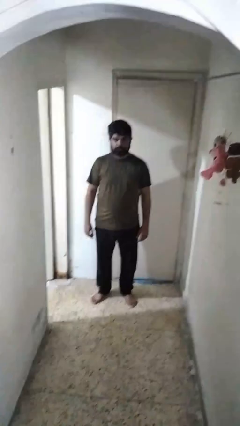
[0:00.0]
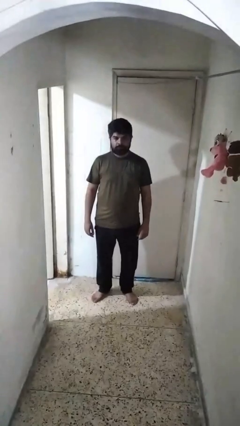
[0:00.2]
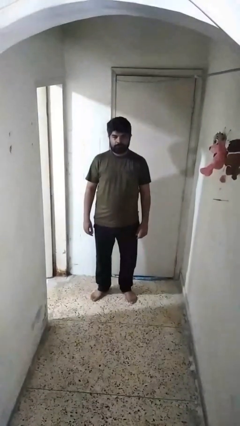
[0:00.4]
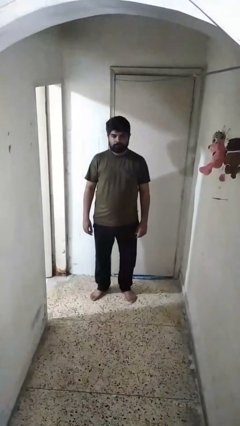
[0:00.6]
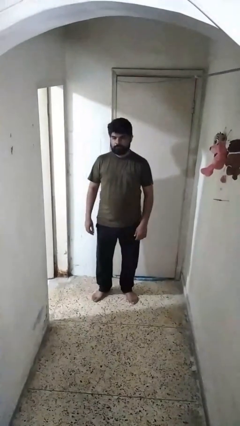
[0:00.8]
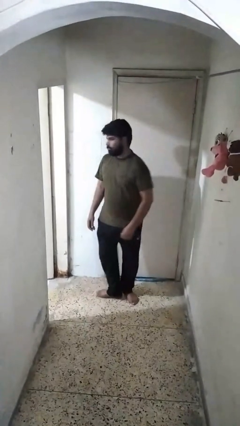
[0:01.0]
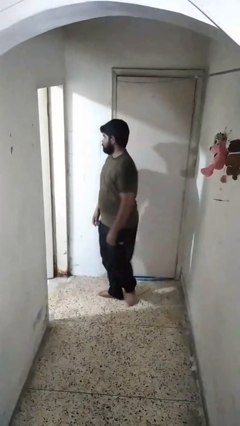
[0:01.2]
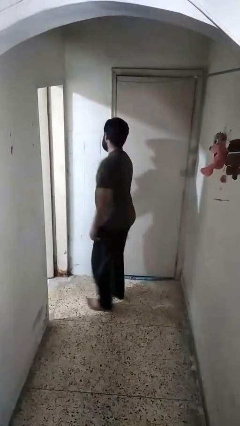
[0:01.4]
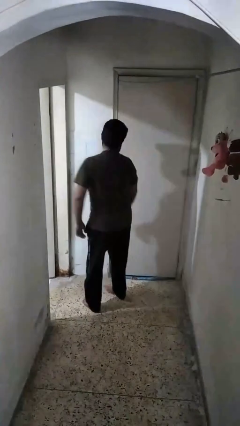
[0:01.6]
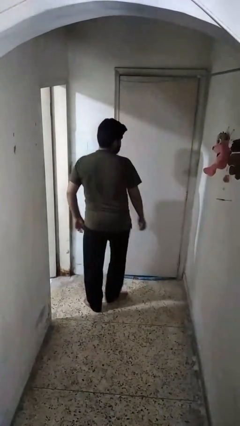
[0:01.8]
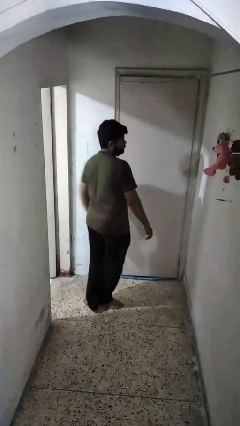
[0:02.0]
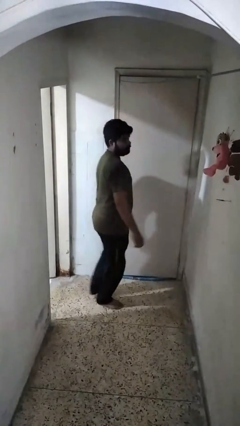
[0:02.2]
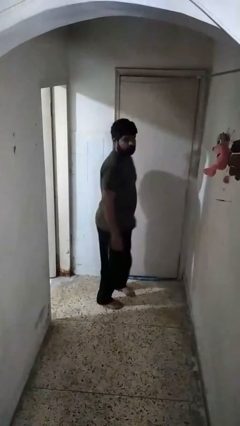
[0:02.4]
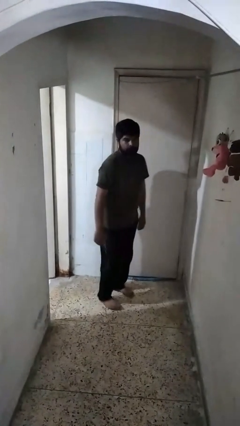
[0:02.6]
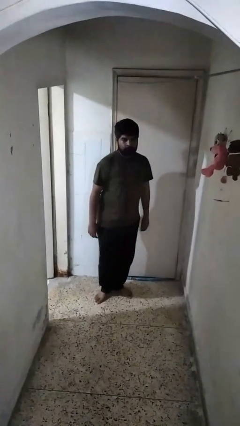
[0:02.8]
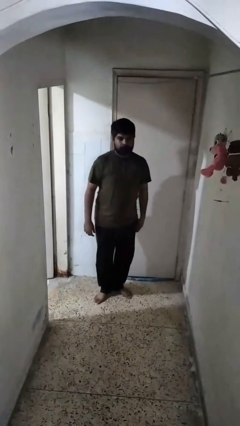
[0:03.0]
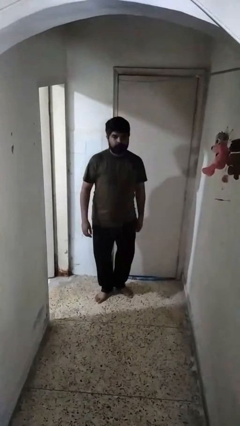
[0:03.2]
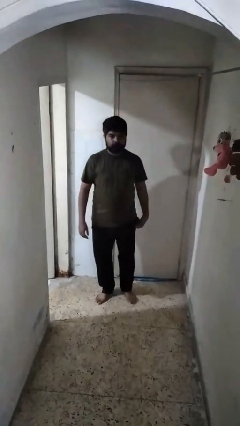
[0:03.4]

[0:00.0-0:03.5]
person twirls

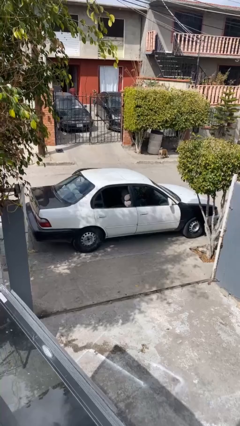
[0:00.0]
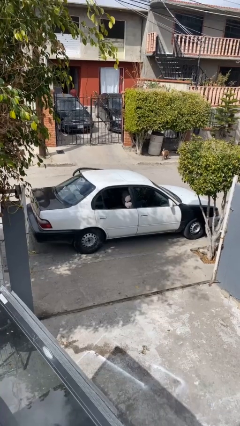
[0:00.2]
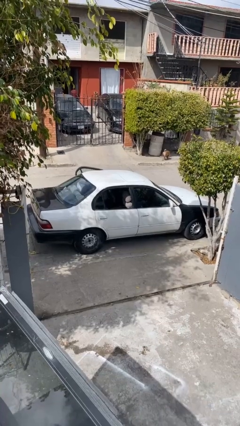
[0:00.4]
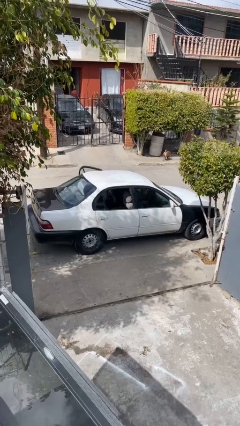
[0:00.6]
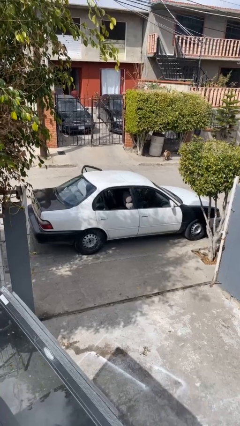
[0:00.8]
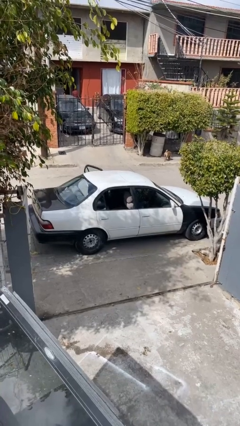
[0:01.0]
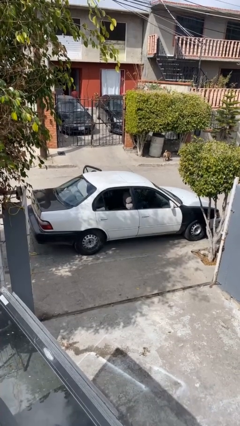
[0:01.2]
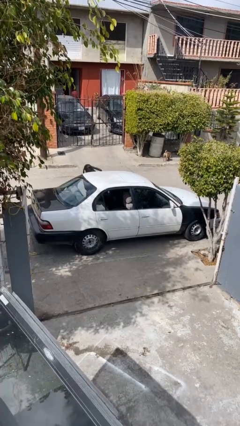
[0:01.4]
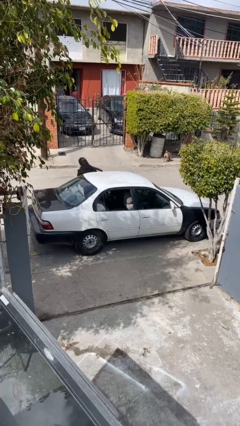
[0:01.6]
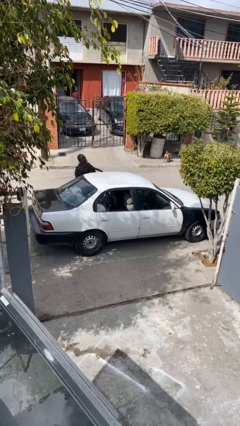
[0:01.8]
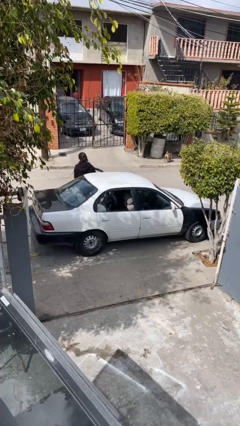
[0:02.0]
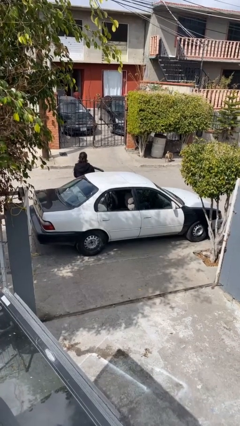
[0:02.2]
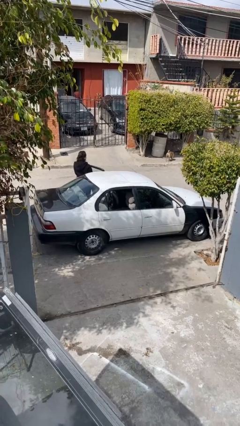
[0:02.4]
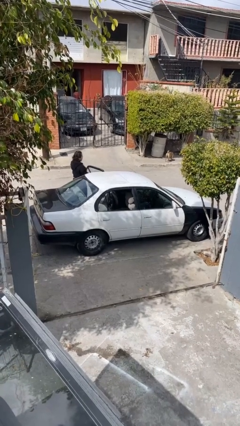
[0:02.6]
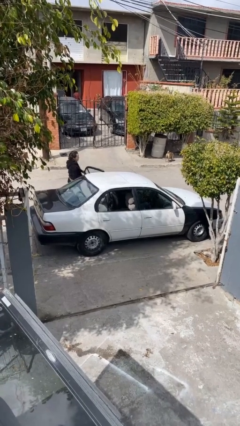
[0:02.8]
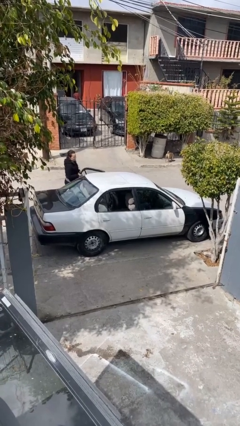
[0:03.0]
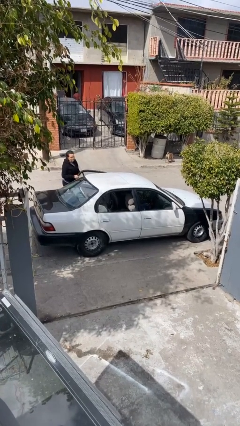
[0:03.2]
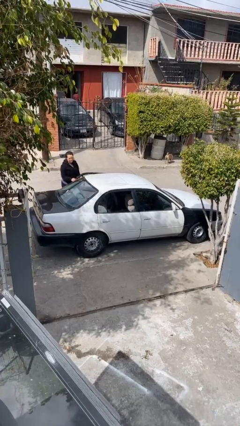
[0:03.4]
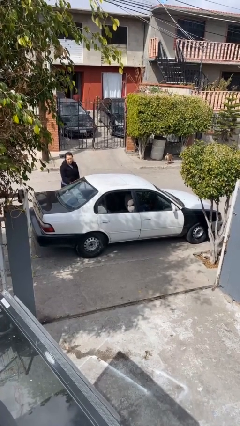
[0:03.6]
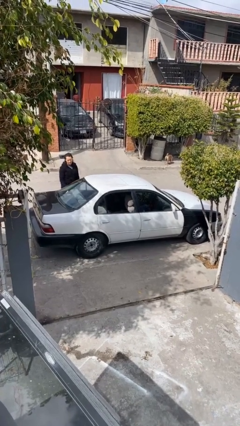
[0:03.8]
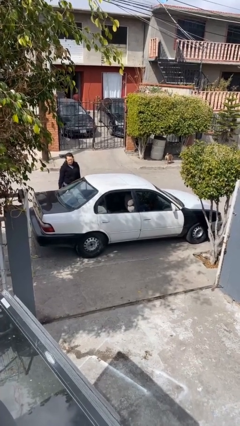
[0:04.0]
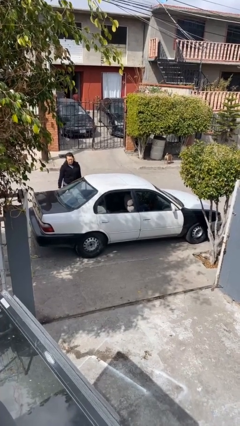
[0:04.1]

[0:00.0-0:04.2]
car drops off person

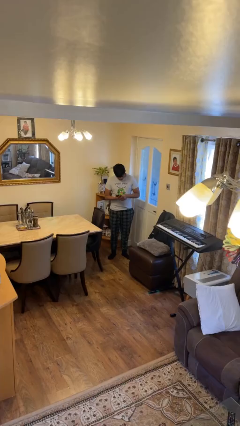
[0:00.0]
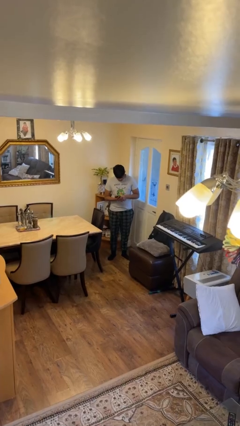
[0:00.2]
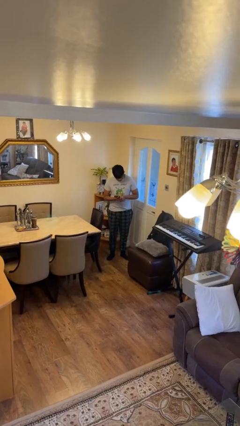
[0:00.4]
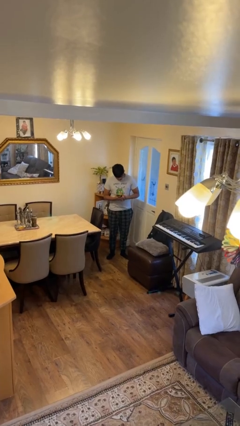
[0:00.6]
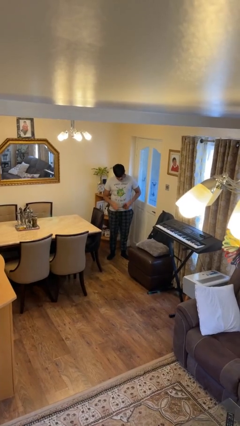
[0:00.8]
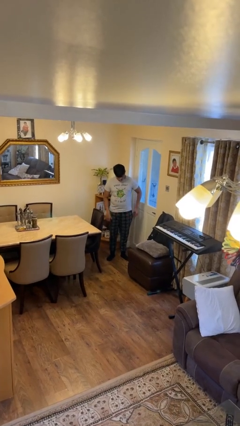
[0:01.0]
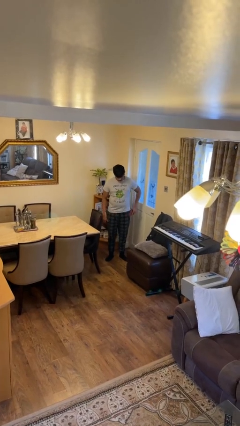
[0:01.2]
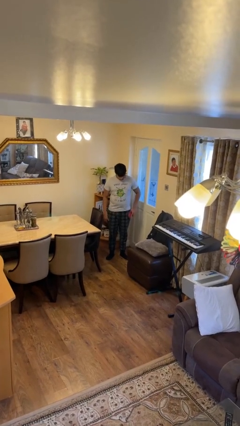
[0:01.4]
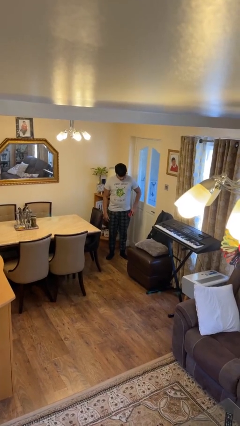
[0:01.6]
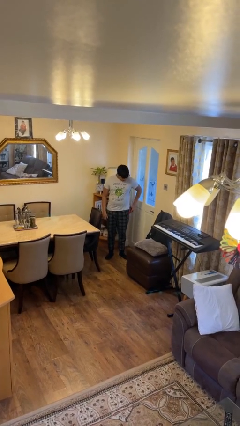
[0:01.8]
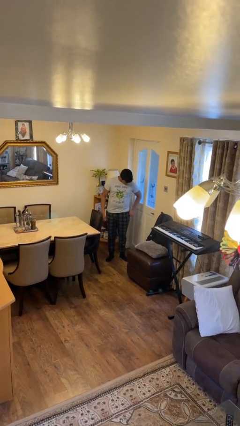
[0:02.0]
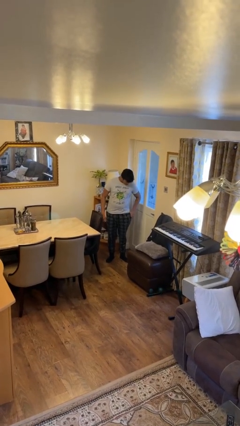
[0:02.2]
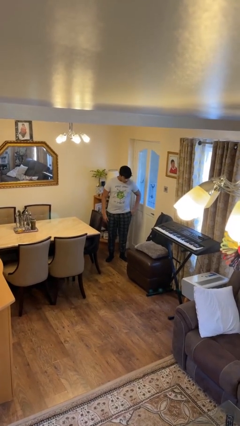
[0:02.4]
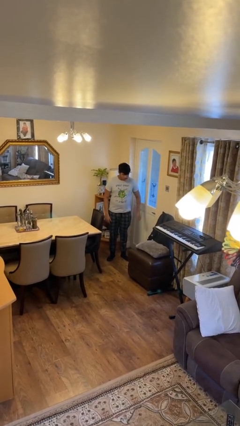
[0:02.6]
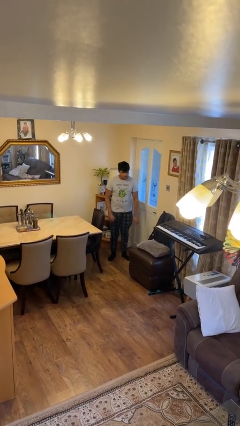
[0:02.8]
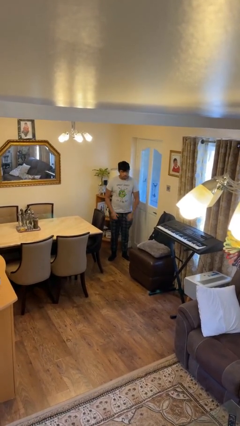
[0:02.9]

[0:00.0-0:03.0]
person puts phone into pocket

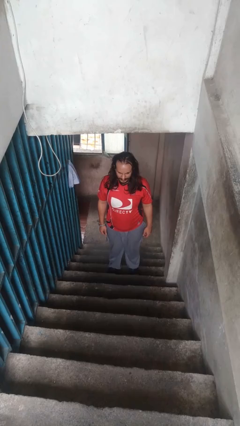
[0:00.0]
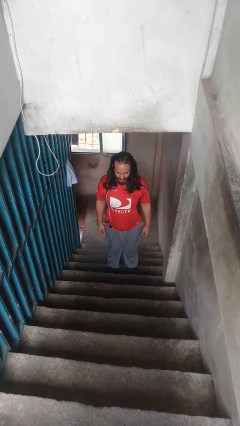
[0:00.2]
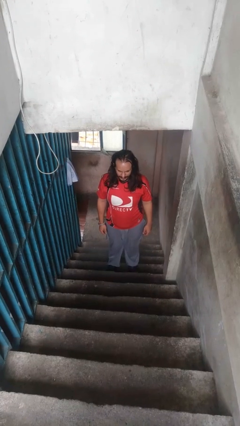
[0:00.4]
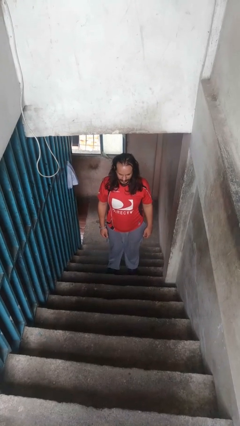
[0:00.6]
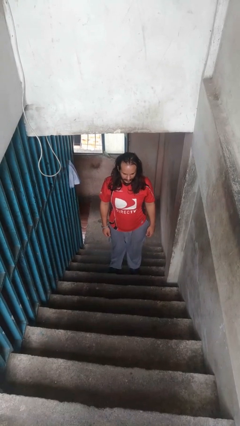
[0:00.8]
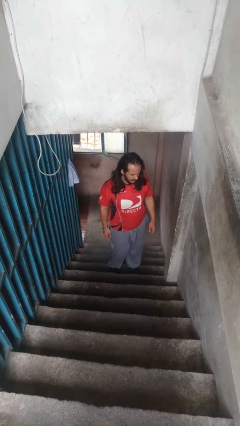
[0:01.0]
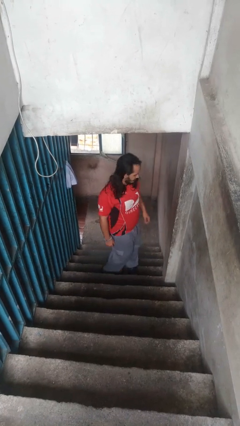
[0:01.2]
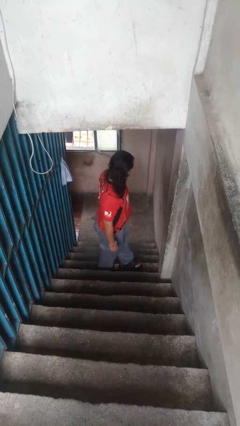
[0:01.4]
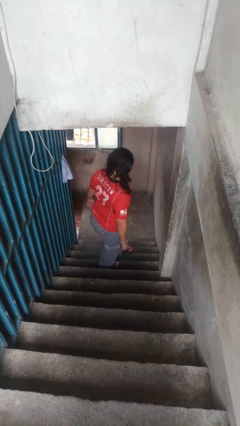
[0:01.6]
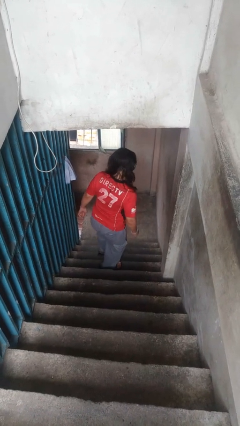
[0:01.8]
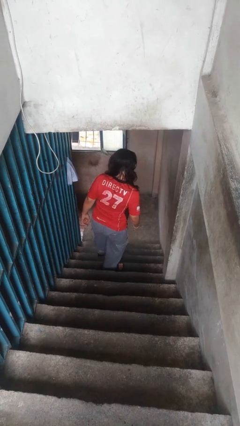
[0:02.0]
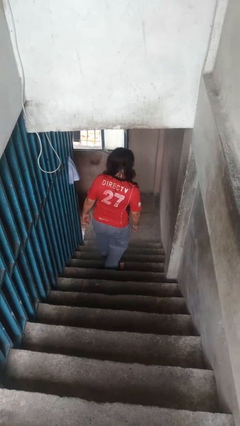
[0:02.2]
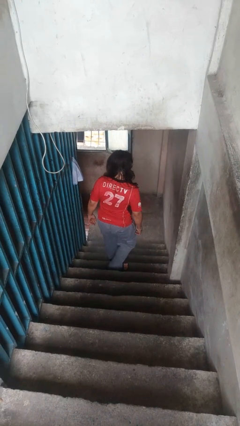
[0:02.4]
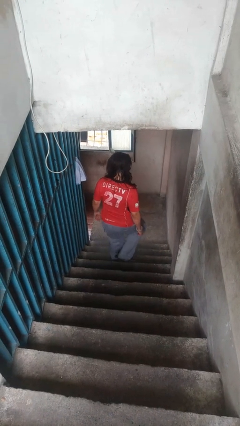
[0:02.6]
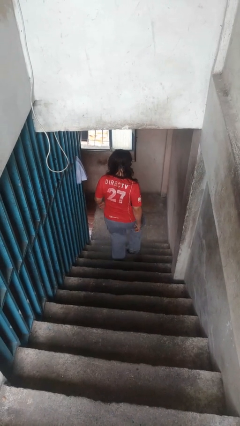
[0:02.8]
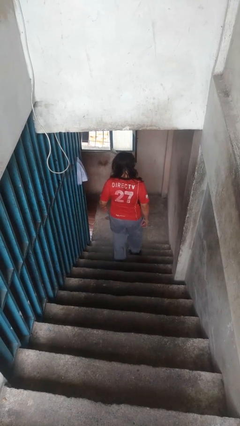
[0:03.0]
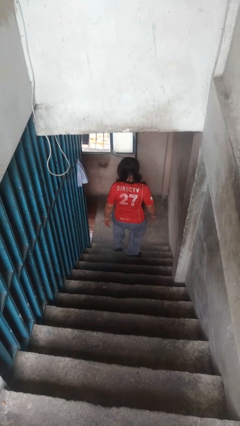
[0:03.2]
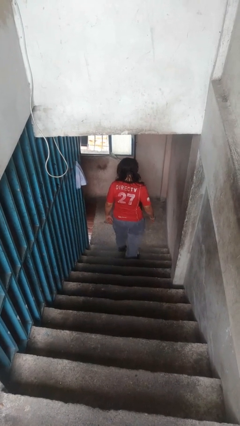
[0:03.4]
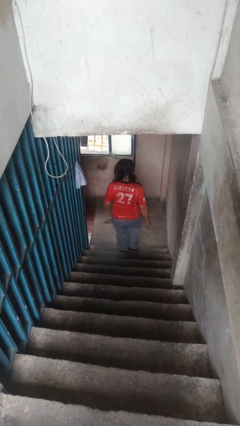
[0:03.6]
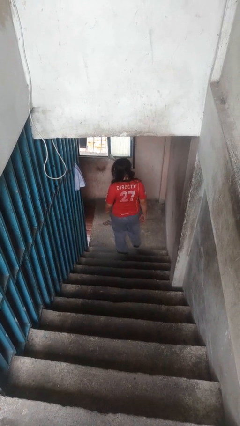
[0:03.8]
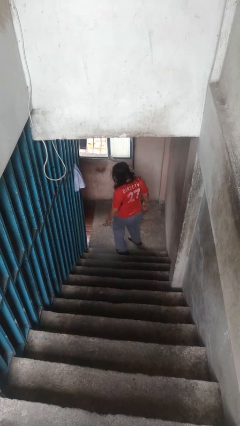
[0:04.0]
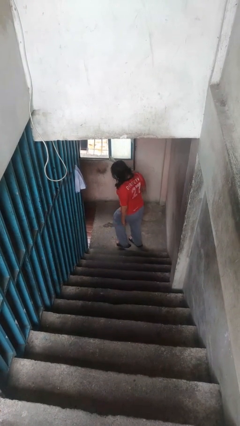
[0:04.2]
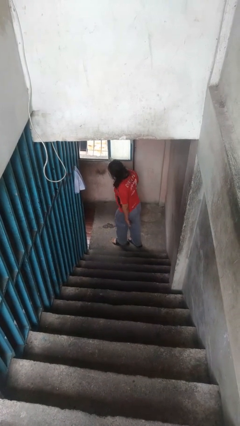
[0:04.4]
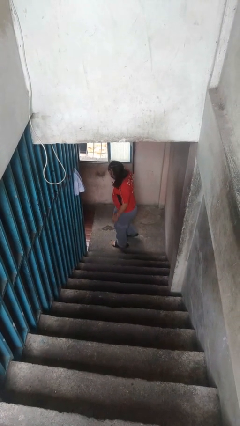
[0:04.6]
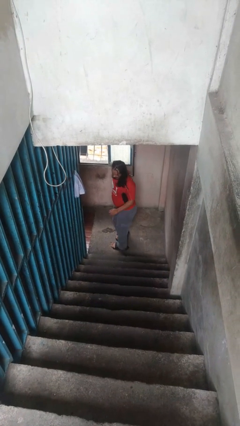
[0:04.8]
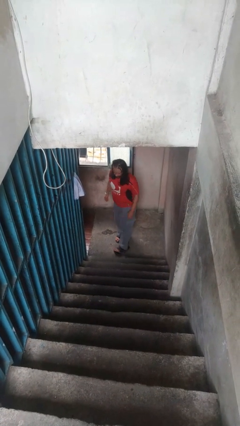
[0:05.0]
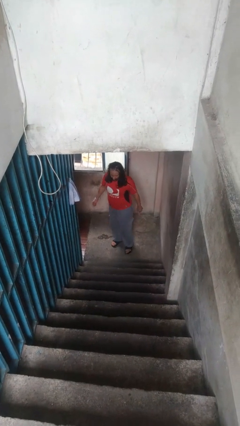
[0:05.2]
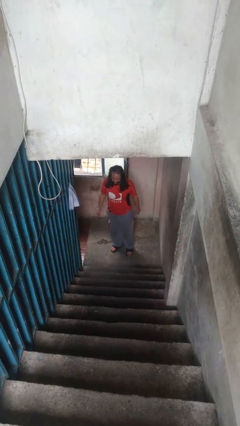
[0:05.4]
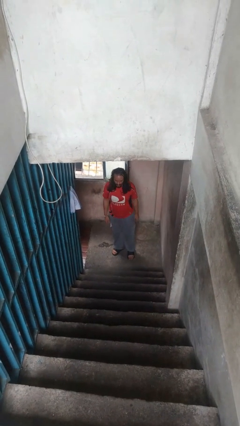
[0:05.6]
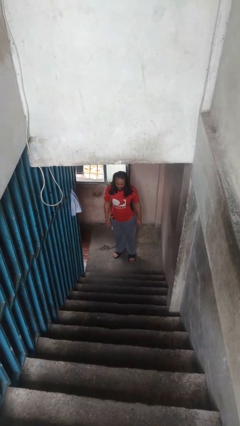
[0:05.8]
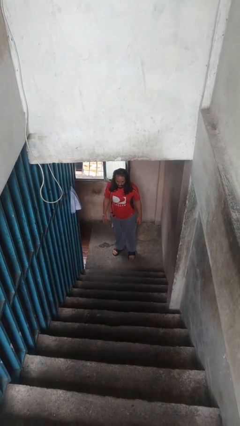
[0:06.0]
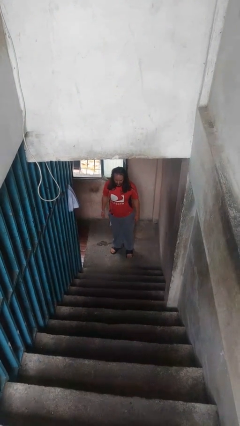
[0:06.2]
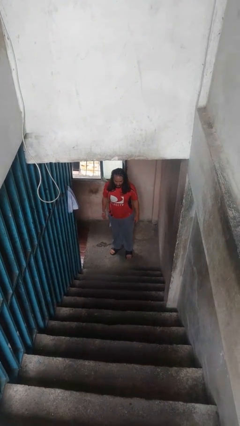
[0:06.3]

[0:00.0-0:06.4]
person climbs down stairs

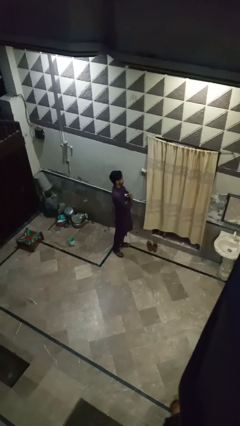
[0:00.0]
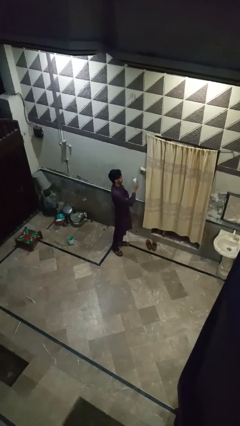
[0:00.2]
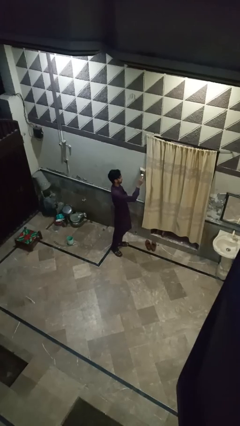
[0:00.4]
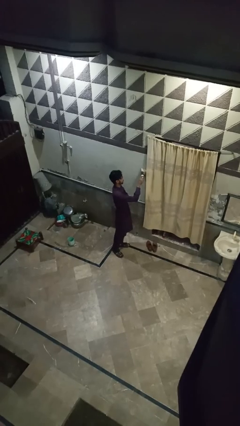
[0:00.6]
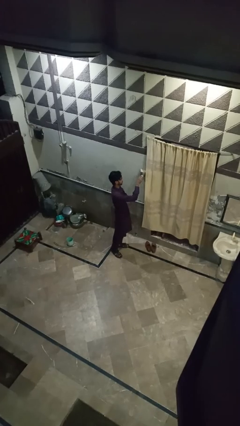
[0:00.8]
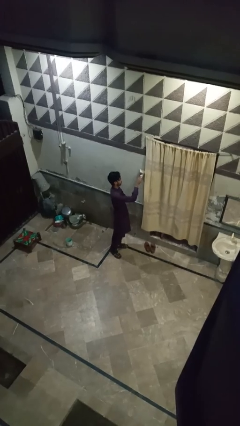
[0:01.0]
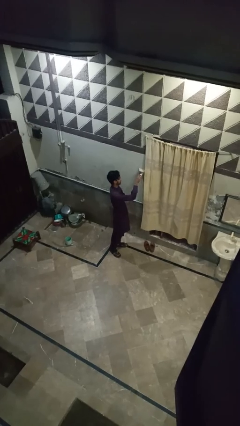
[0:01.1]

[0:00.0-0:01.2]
person plugs into electrical socket
